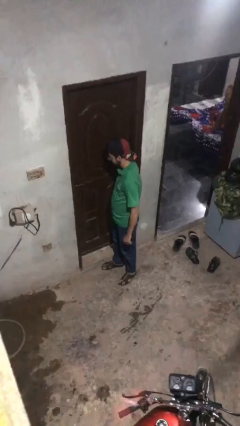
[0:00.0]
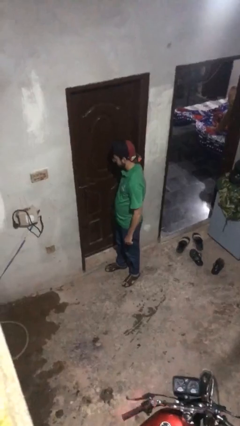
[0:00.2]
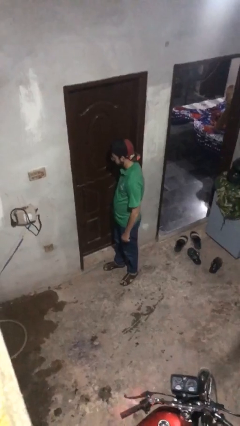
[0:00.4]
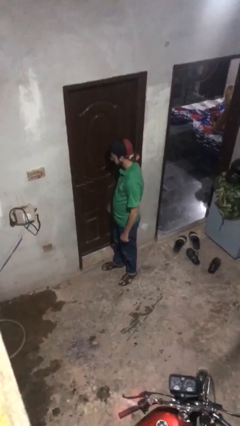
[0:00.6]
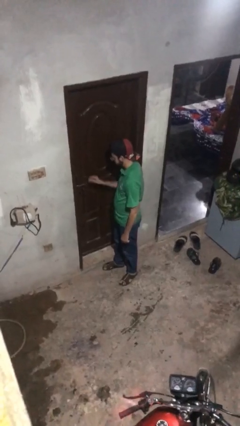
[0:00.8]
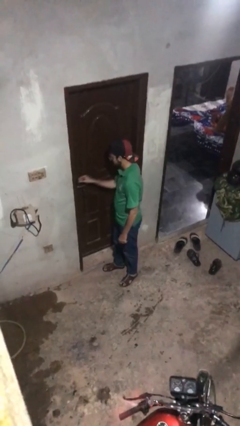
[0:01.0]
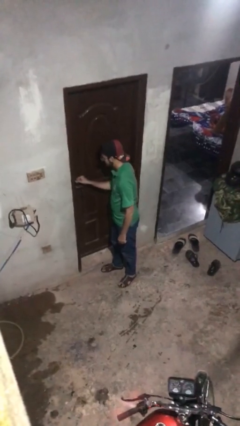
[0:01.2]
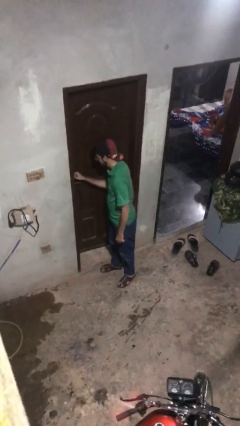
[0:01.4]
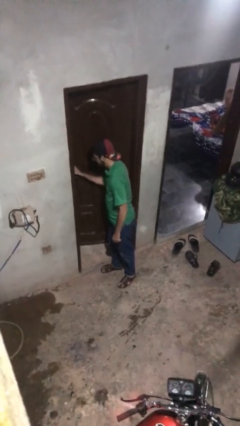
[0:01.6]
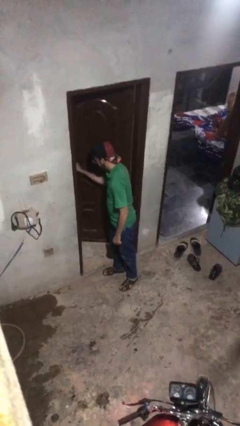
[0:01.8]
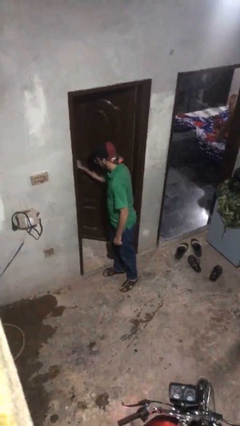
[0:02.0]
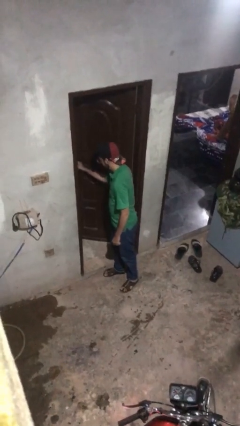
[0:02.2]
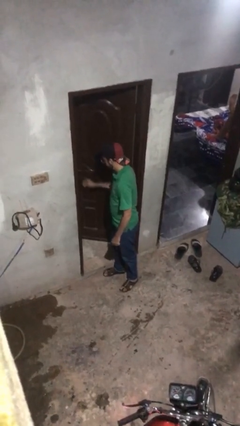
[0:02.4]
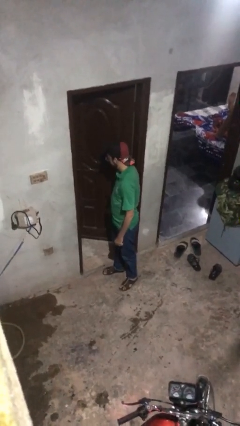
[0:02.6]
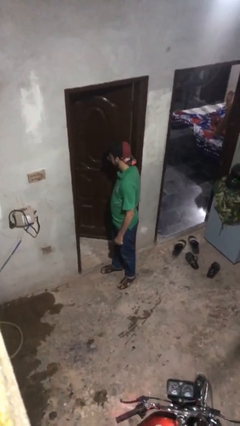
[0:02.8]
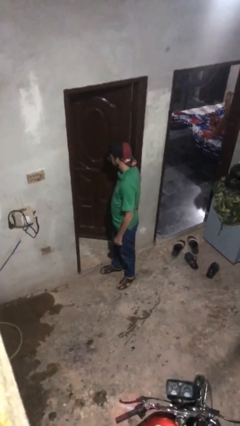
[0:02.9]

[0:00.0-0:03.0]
person opens facility door

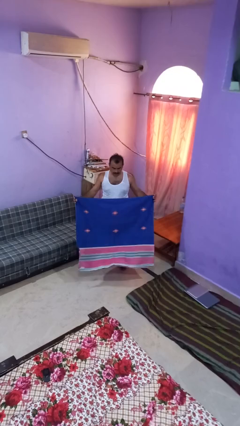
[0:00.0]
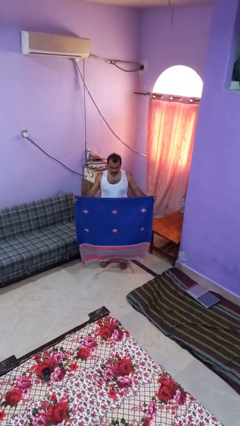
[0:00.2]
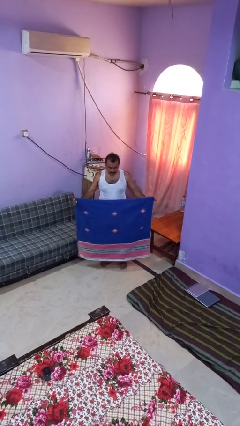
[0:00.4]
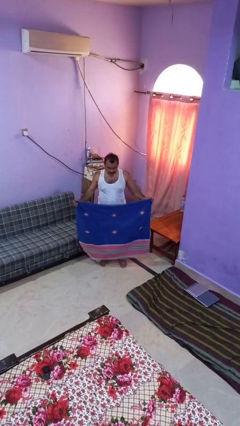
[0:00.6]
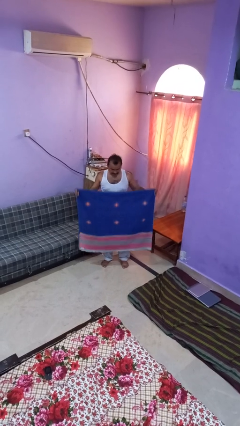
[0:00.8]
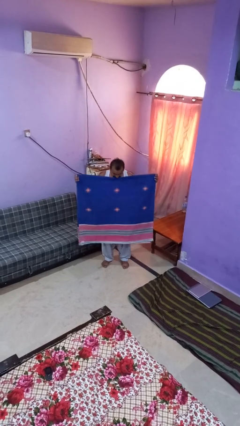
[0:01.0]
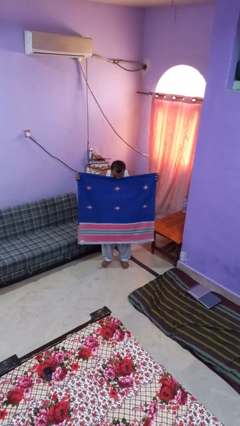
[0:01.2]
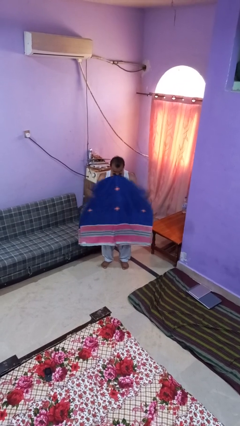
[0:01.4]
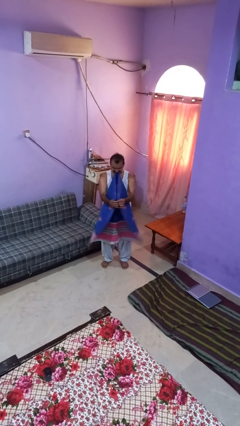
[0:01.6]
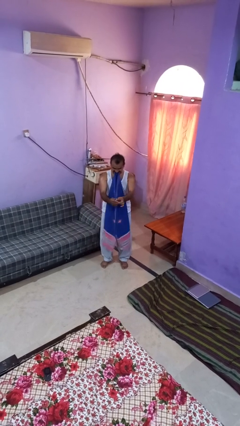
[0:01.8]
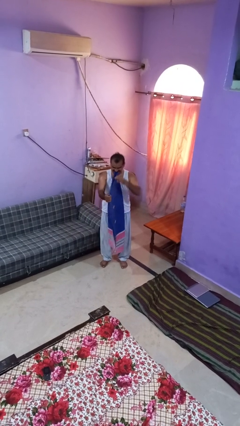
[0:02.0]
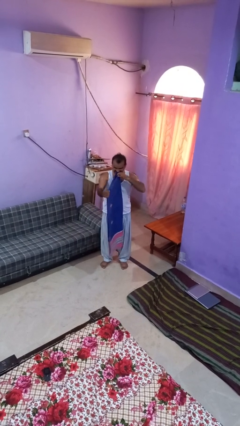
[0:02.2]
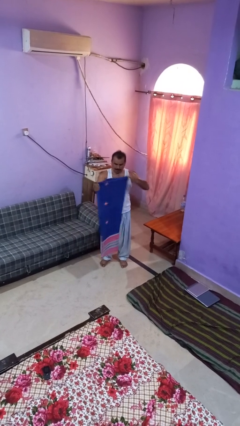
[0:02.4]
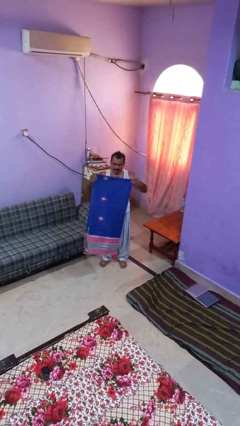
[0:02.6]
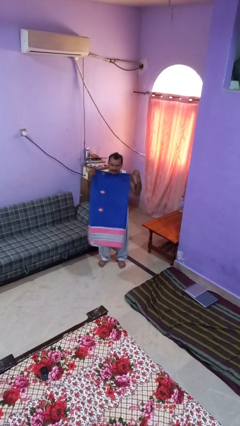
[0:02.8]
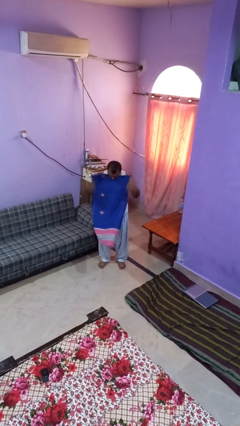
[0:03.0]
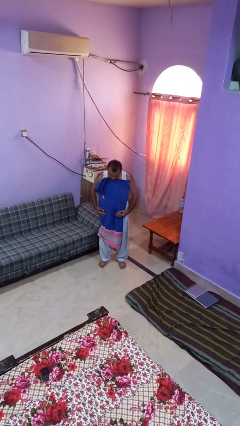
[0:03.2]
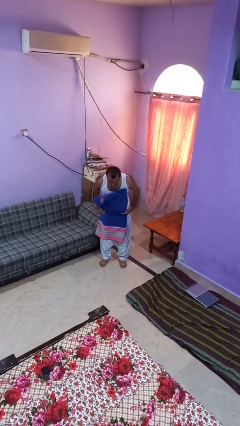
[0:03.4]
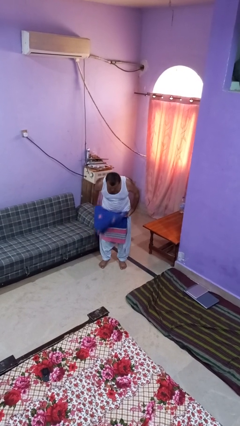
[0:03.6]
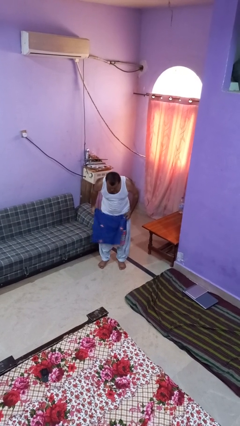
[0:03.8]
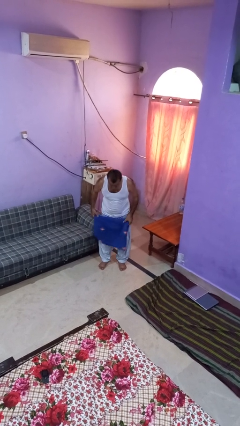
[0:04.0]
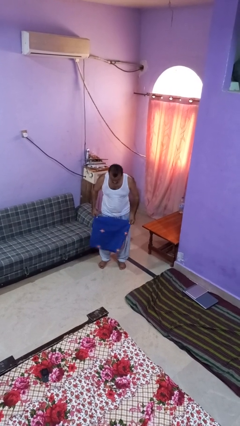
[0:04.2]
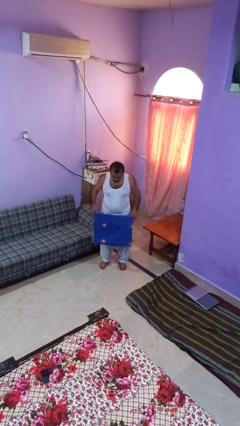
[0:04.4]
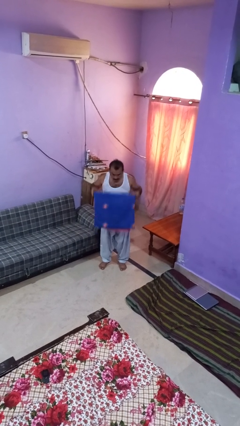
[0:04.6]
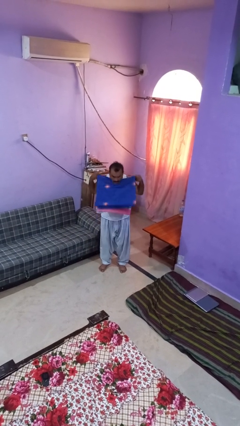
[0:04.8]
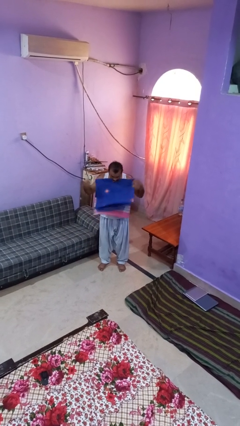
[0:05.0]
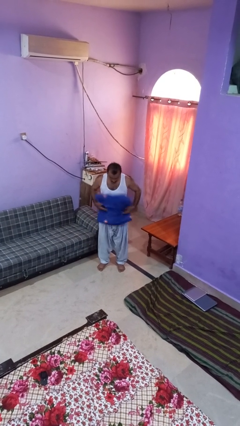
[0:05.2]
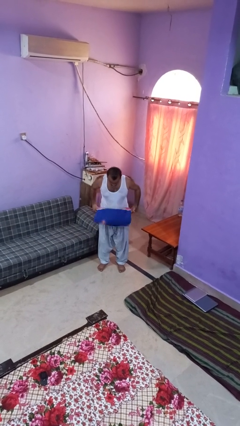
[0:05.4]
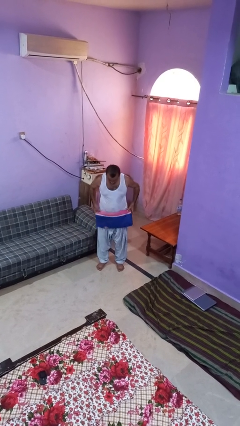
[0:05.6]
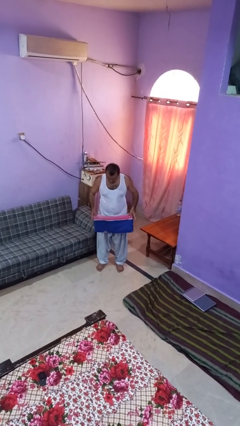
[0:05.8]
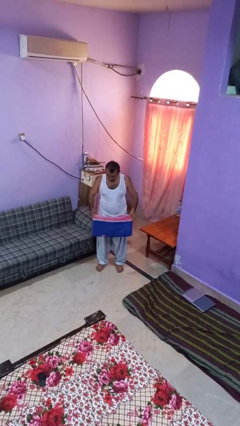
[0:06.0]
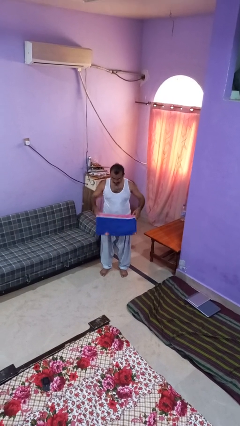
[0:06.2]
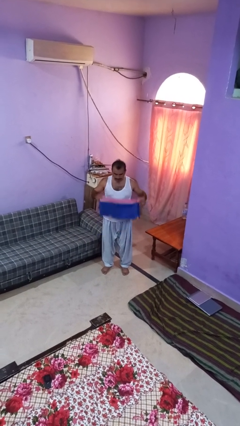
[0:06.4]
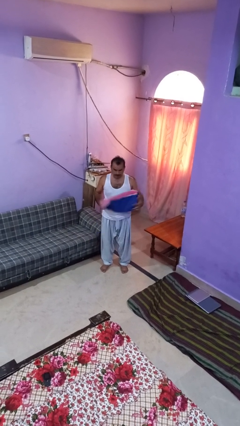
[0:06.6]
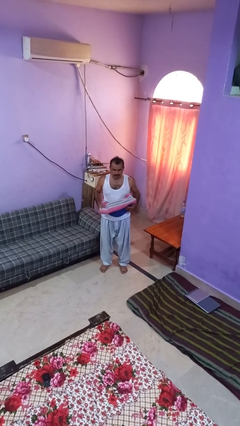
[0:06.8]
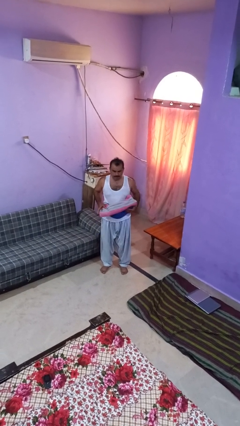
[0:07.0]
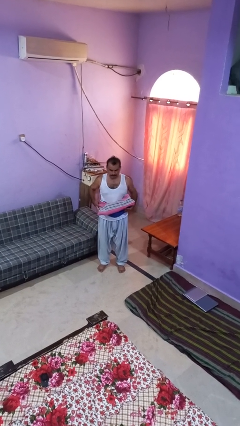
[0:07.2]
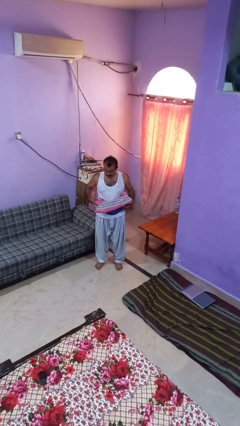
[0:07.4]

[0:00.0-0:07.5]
person folds blanket

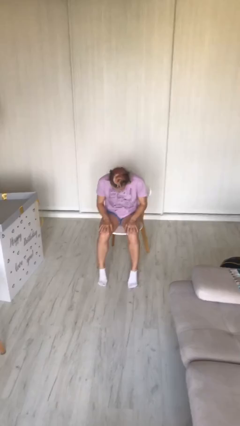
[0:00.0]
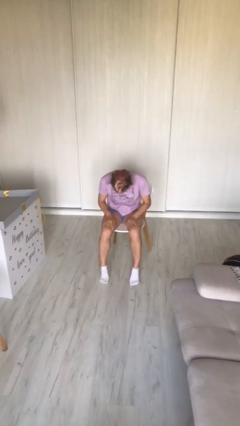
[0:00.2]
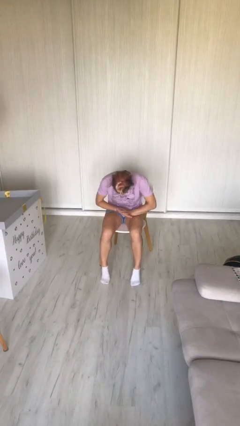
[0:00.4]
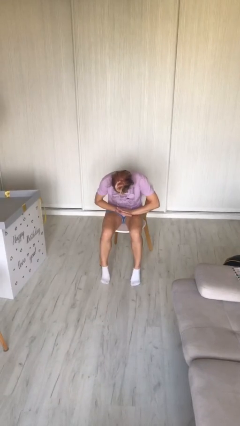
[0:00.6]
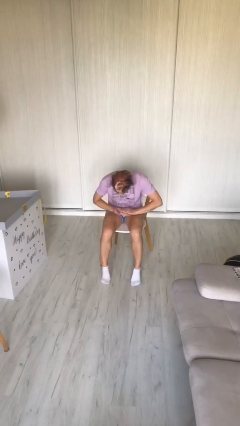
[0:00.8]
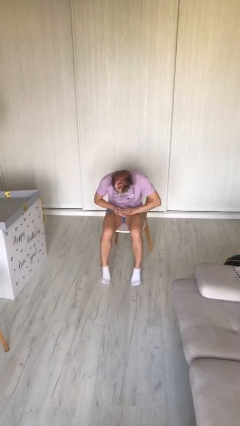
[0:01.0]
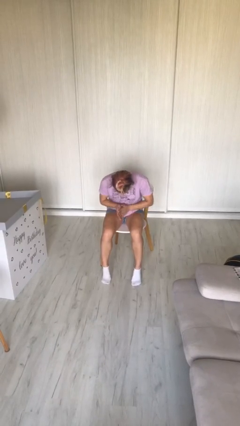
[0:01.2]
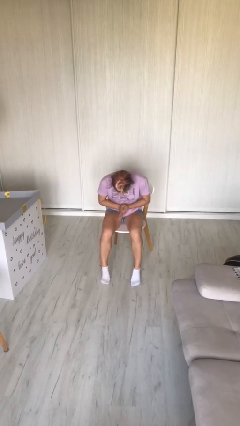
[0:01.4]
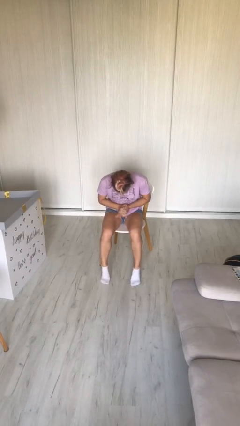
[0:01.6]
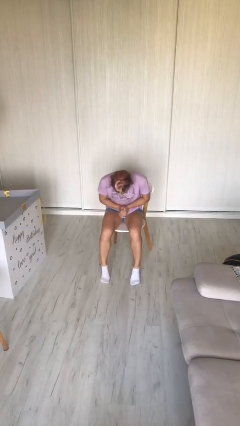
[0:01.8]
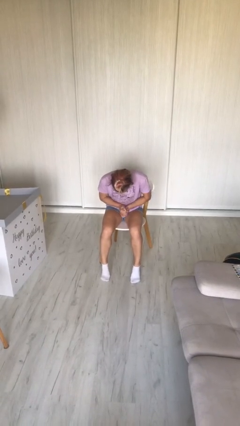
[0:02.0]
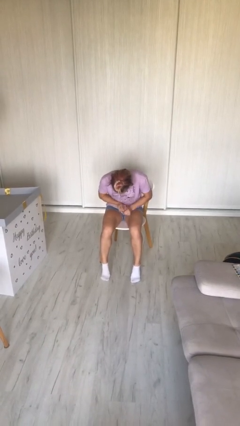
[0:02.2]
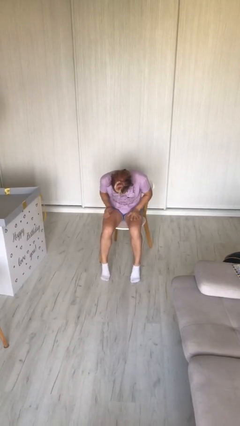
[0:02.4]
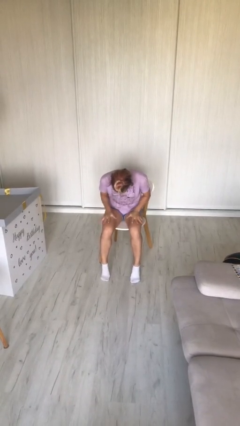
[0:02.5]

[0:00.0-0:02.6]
person looks at hands in lap

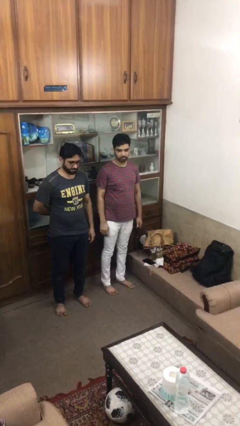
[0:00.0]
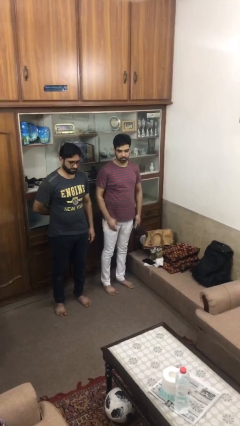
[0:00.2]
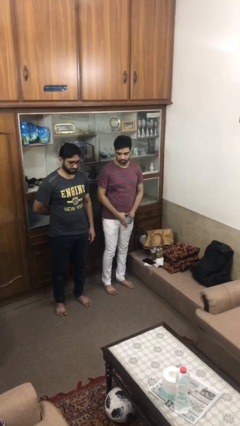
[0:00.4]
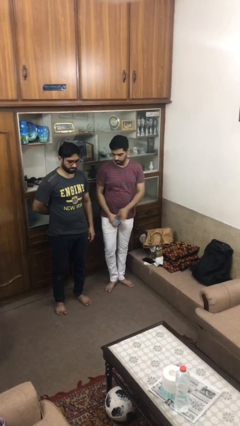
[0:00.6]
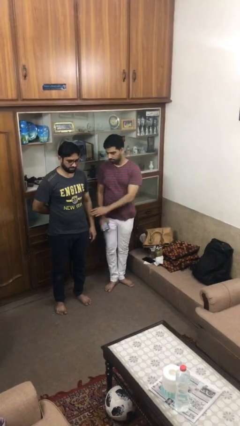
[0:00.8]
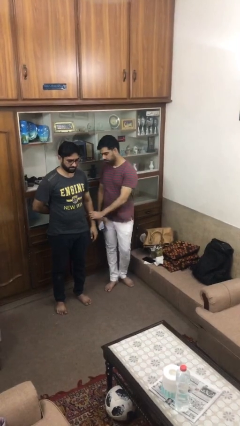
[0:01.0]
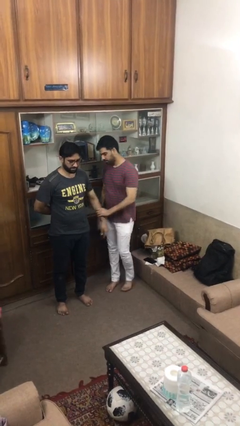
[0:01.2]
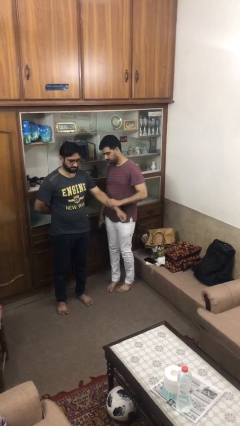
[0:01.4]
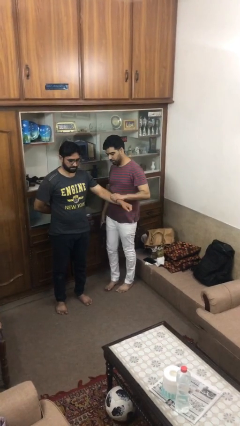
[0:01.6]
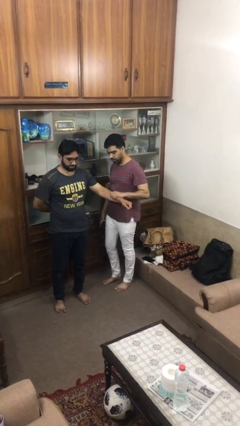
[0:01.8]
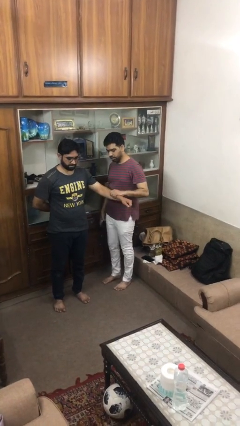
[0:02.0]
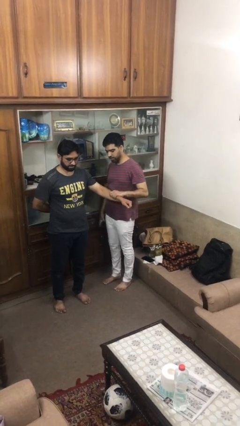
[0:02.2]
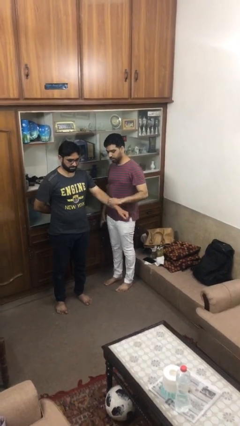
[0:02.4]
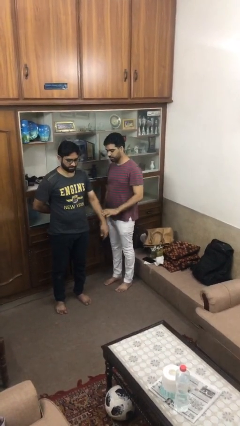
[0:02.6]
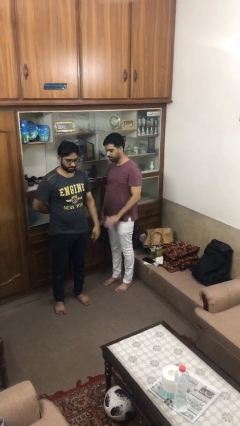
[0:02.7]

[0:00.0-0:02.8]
person grabs person by forearm

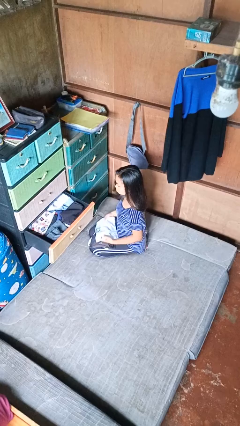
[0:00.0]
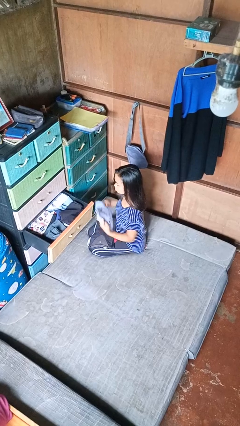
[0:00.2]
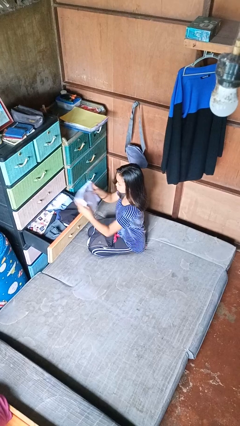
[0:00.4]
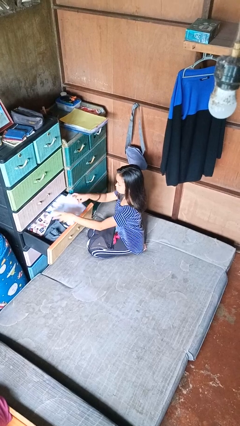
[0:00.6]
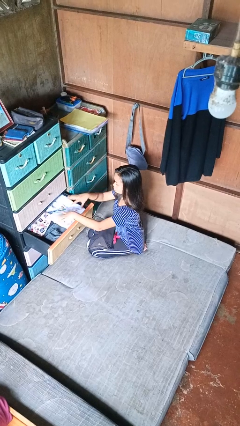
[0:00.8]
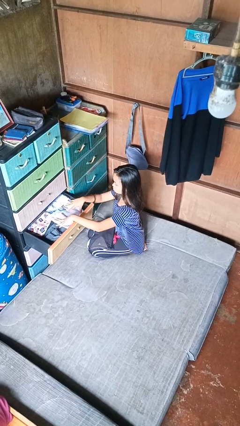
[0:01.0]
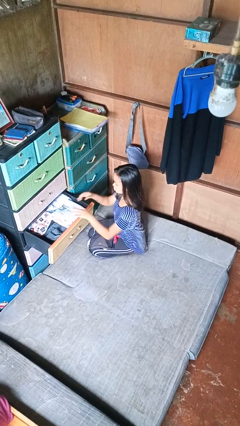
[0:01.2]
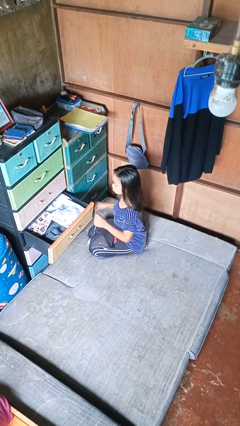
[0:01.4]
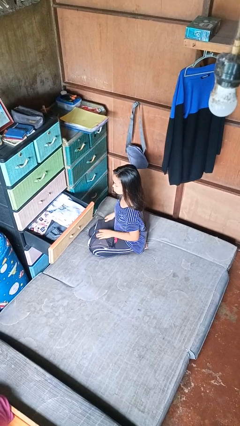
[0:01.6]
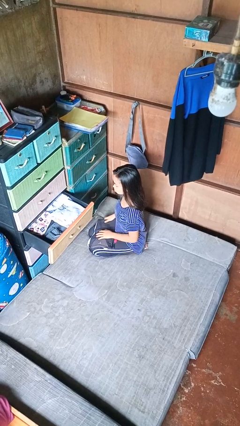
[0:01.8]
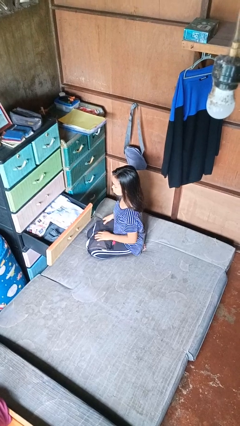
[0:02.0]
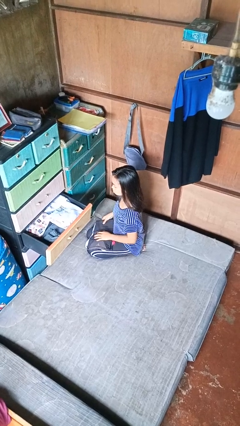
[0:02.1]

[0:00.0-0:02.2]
person puts clothes into dresser
